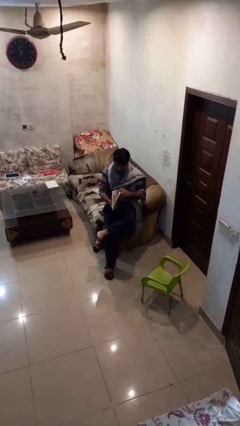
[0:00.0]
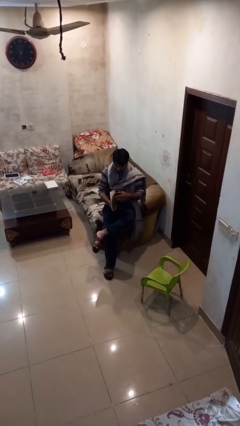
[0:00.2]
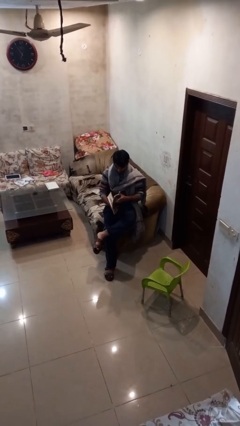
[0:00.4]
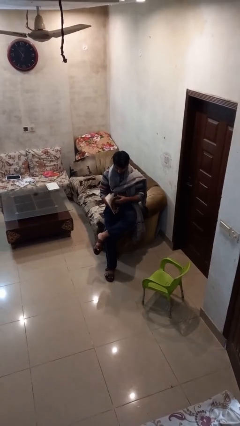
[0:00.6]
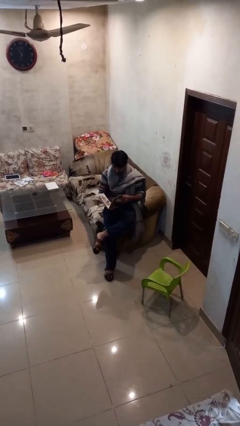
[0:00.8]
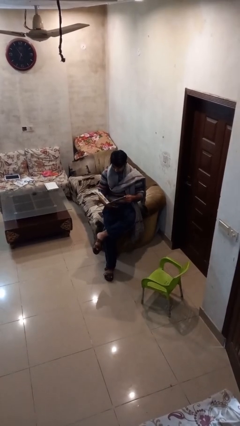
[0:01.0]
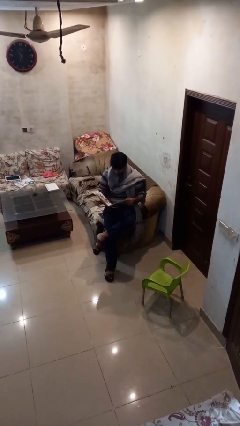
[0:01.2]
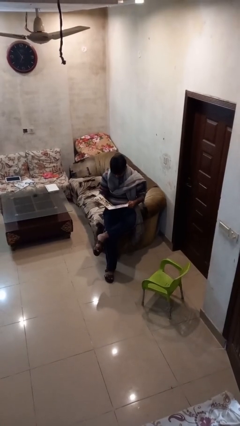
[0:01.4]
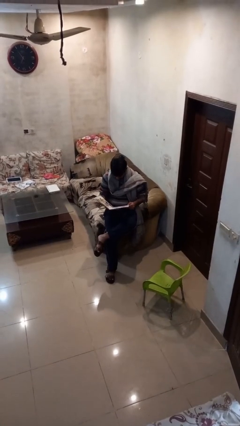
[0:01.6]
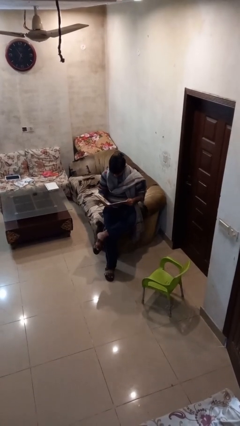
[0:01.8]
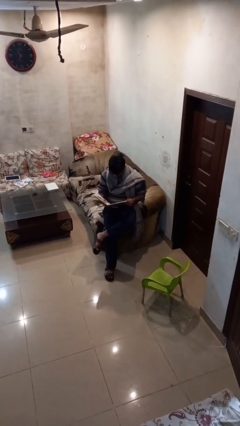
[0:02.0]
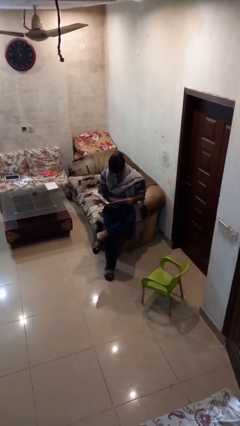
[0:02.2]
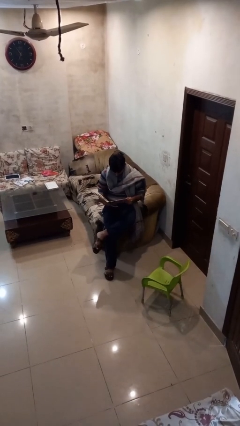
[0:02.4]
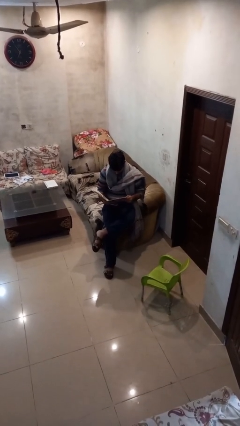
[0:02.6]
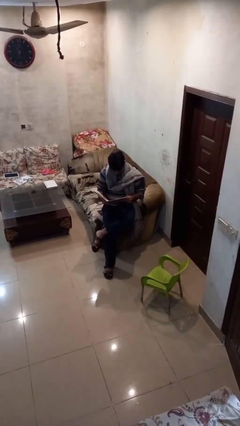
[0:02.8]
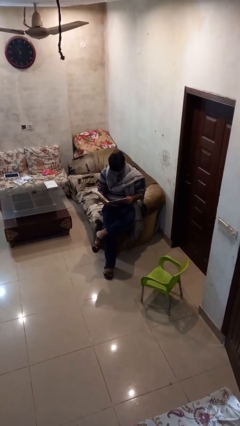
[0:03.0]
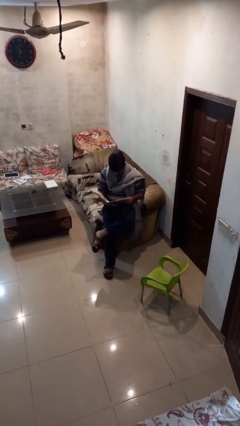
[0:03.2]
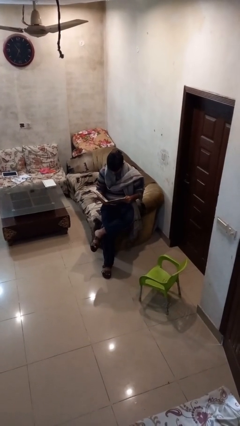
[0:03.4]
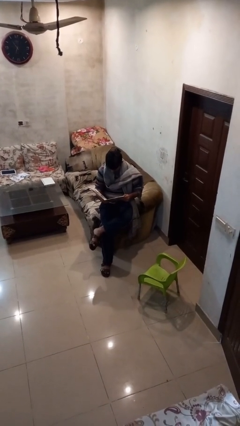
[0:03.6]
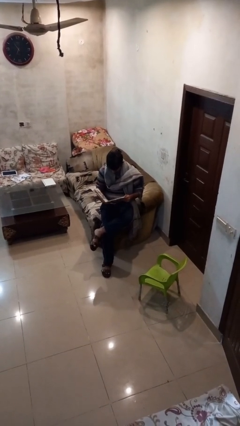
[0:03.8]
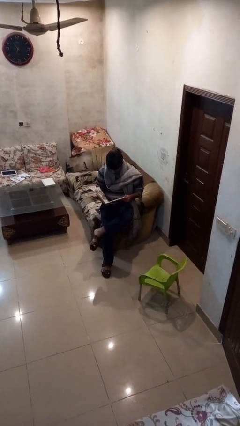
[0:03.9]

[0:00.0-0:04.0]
person reads document

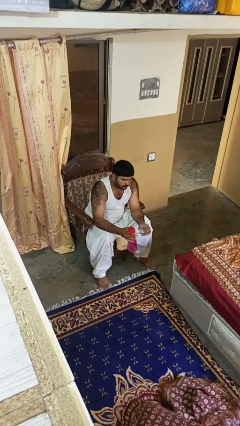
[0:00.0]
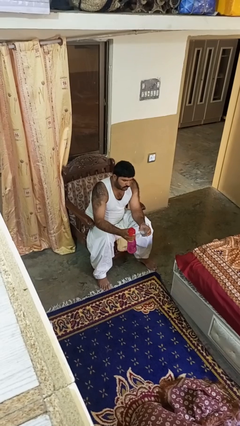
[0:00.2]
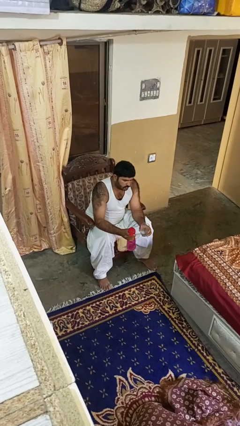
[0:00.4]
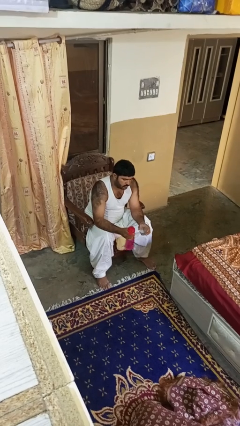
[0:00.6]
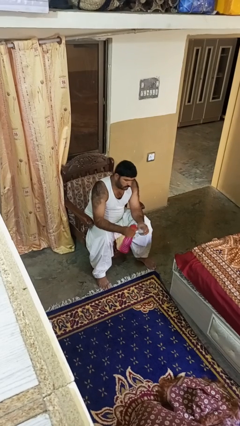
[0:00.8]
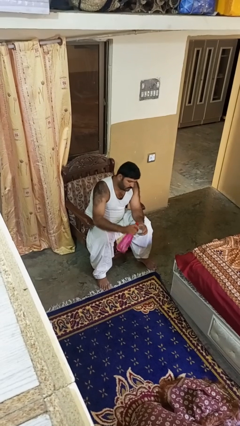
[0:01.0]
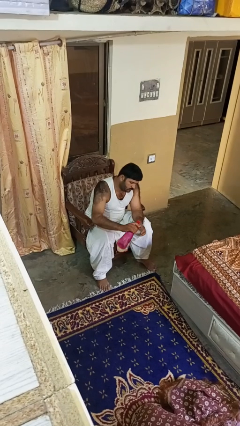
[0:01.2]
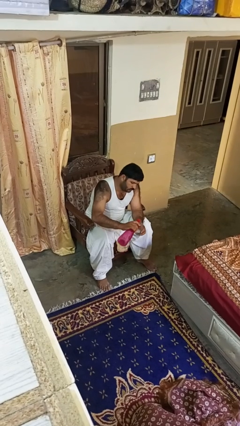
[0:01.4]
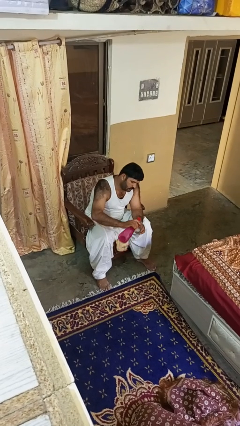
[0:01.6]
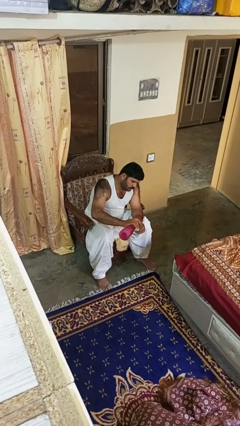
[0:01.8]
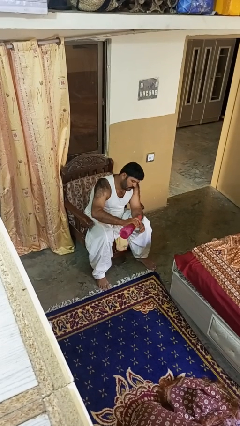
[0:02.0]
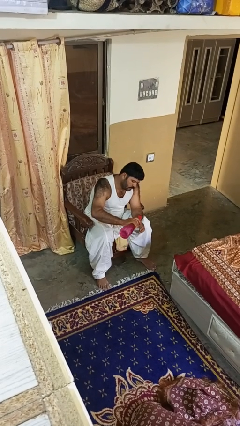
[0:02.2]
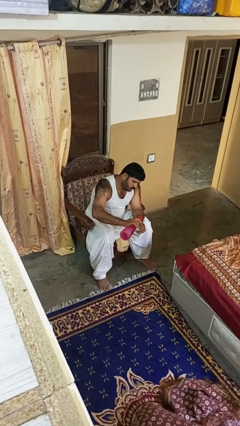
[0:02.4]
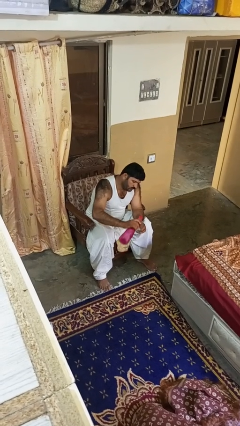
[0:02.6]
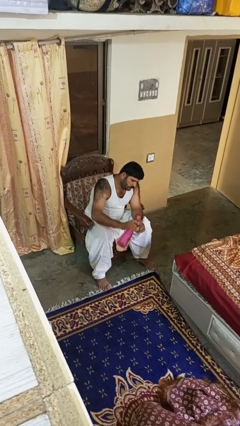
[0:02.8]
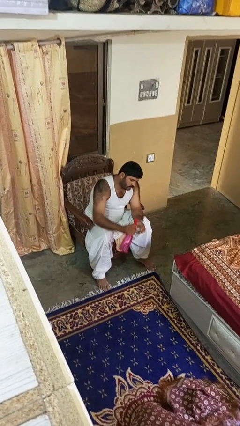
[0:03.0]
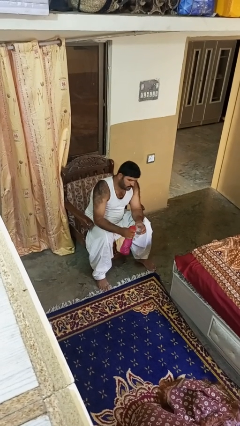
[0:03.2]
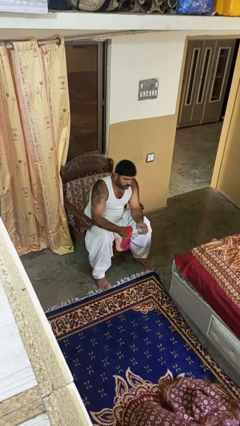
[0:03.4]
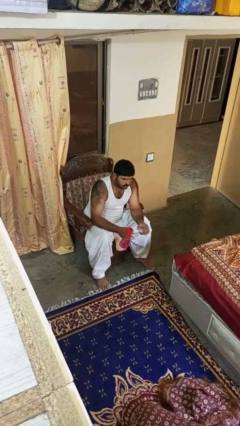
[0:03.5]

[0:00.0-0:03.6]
person pours liquid into cup

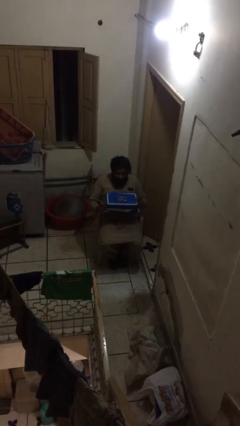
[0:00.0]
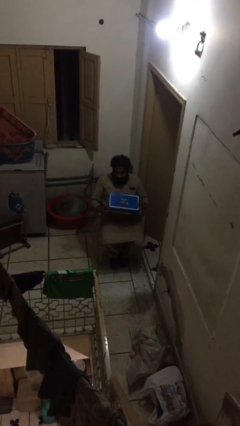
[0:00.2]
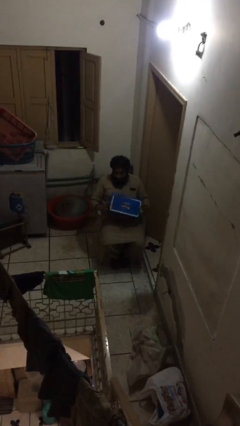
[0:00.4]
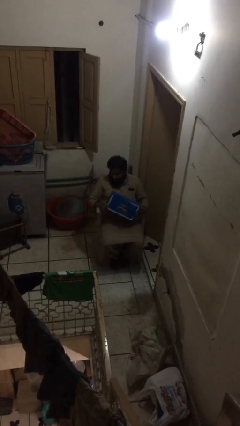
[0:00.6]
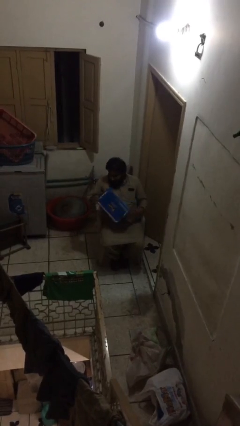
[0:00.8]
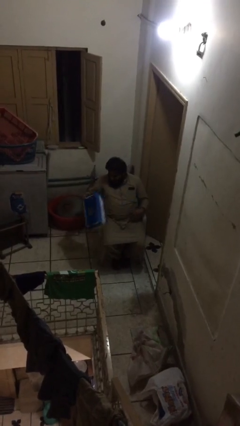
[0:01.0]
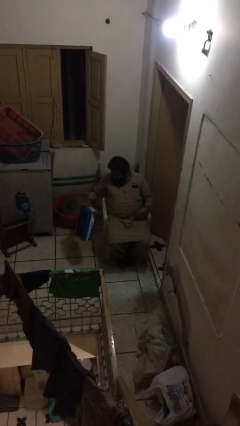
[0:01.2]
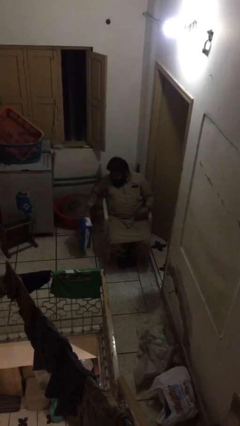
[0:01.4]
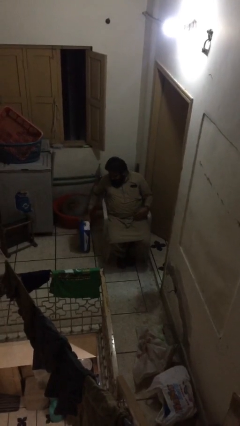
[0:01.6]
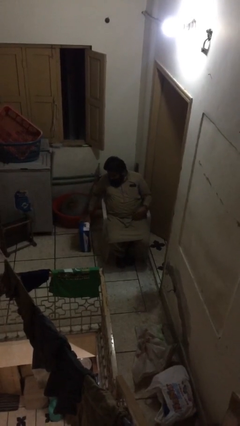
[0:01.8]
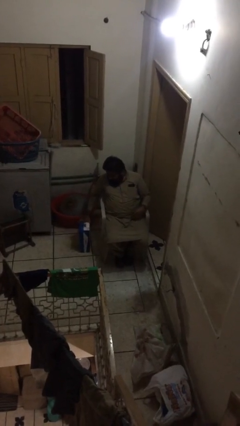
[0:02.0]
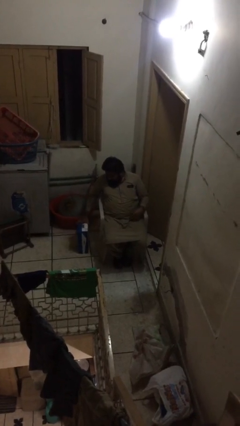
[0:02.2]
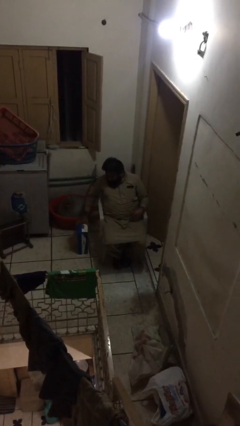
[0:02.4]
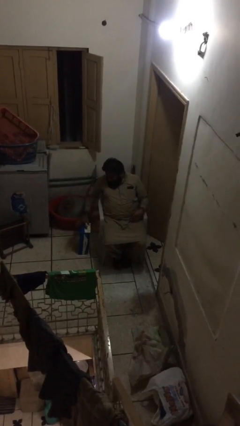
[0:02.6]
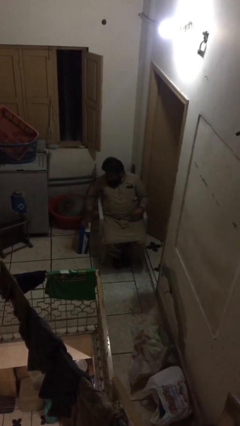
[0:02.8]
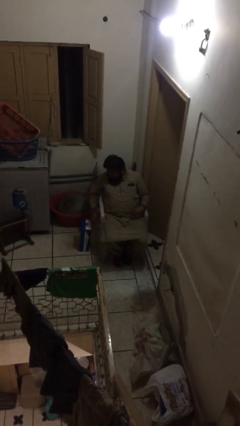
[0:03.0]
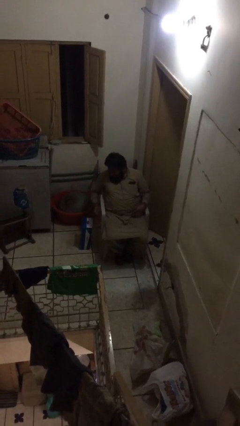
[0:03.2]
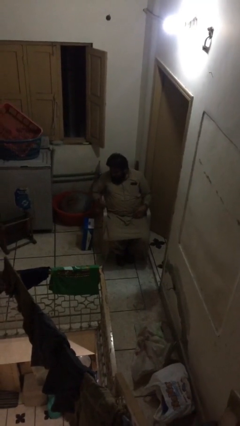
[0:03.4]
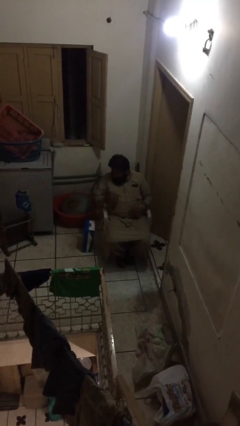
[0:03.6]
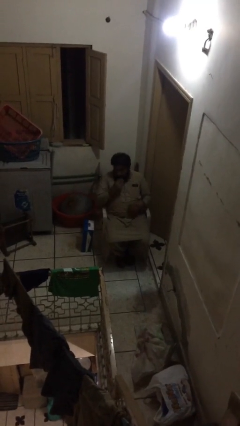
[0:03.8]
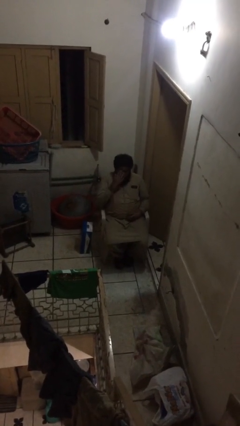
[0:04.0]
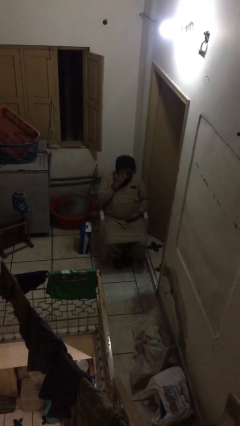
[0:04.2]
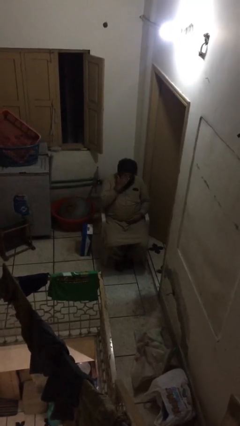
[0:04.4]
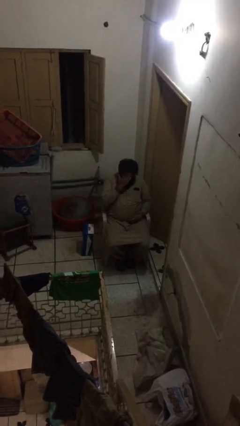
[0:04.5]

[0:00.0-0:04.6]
person puts down object on floor

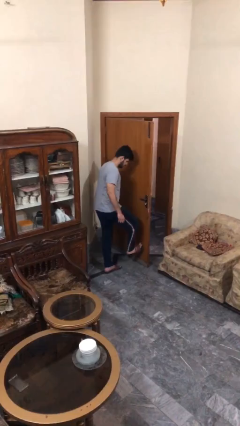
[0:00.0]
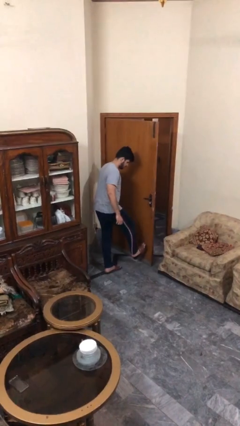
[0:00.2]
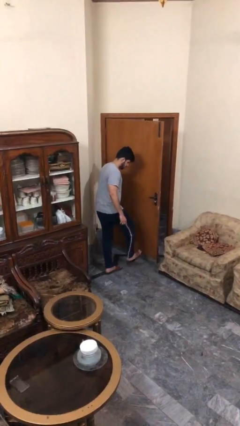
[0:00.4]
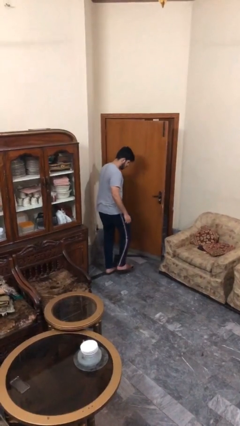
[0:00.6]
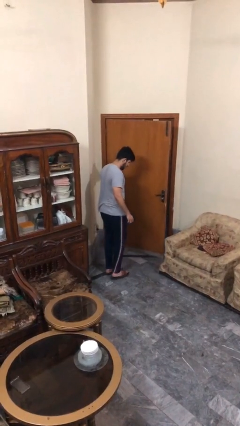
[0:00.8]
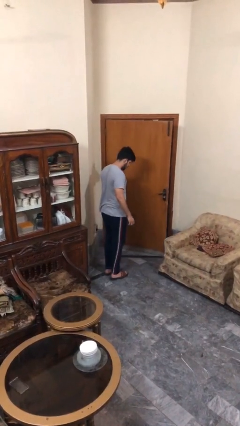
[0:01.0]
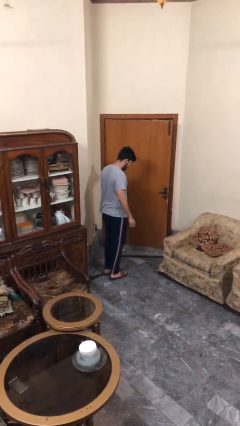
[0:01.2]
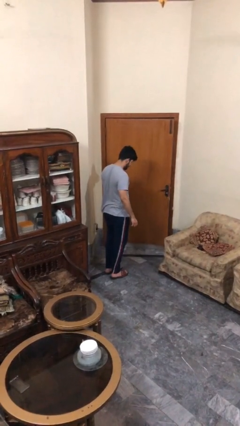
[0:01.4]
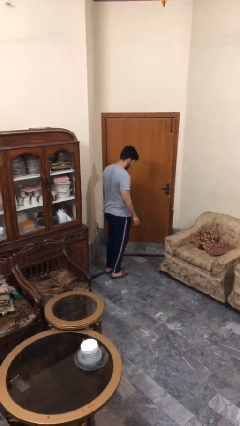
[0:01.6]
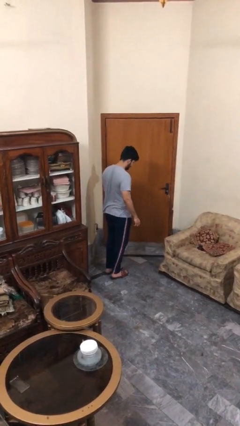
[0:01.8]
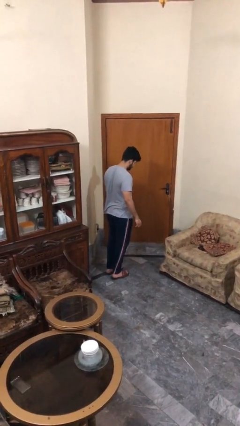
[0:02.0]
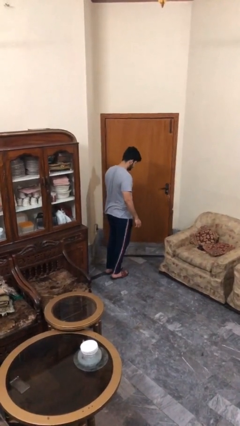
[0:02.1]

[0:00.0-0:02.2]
person closes door with foot

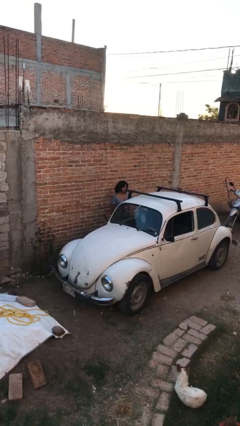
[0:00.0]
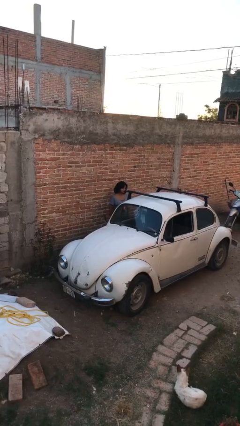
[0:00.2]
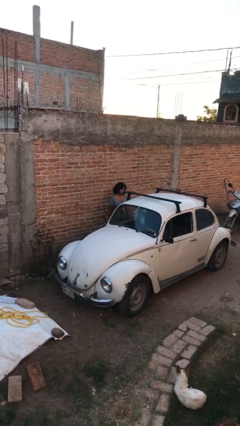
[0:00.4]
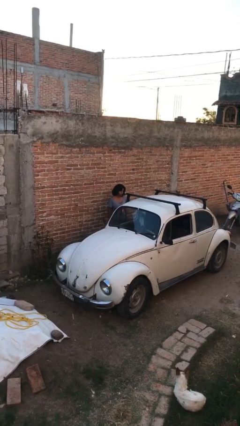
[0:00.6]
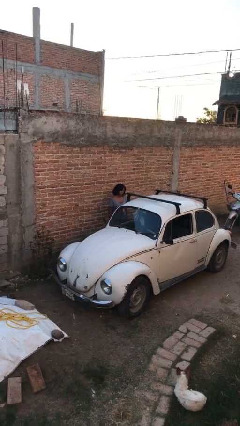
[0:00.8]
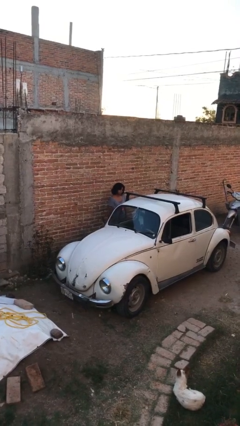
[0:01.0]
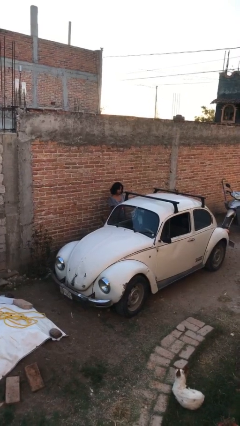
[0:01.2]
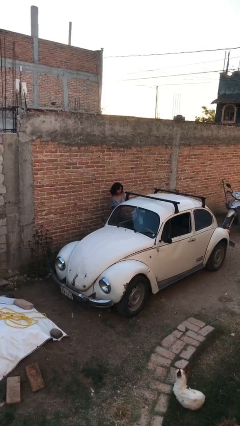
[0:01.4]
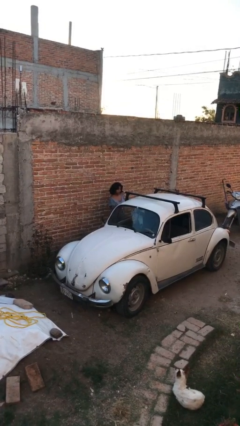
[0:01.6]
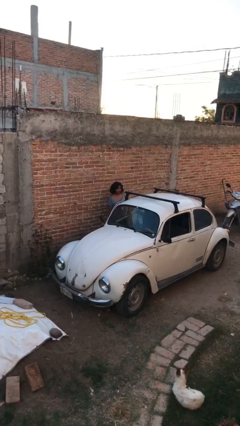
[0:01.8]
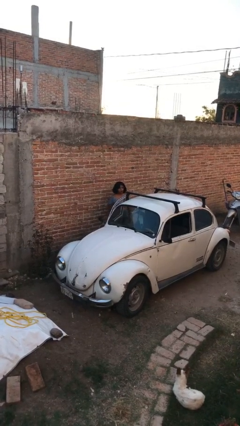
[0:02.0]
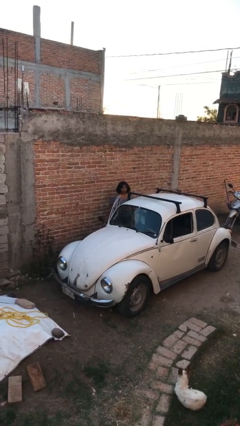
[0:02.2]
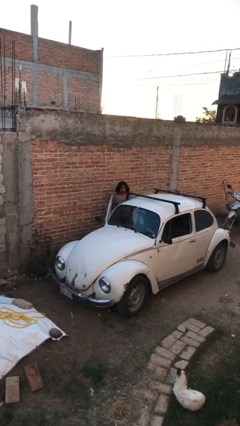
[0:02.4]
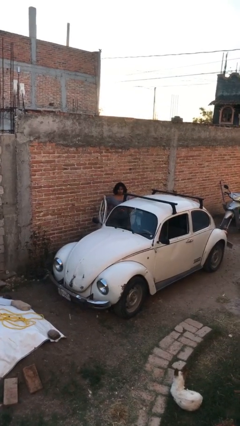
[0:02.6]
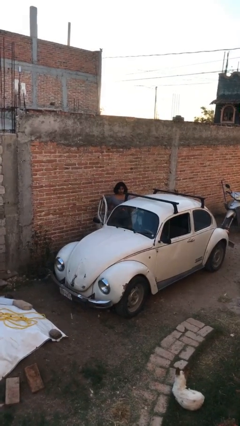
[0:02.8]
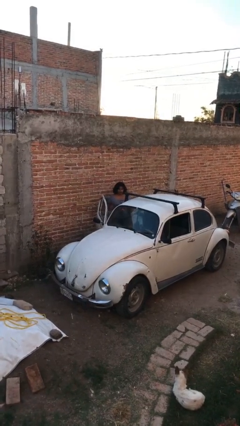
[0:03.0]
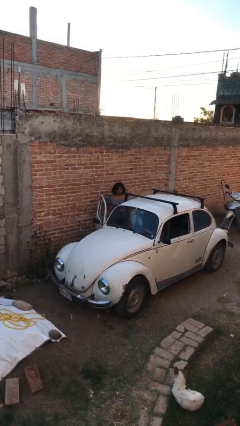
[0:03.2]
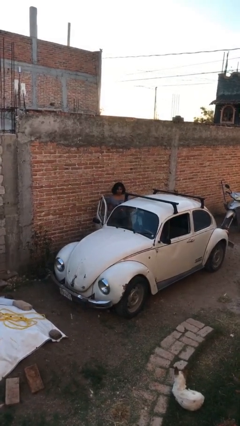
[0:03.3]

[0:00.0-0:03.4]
person opens car door
